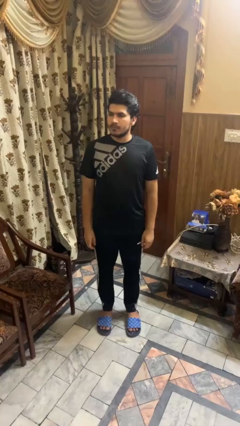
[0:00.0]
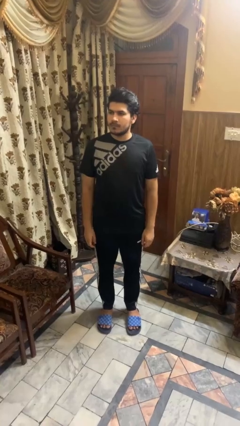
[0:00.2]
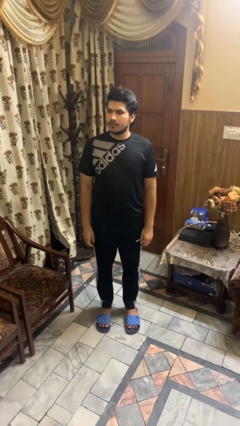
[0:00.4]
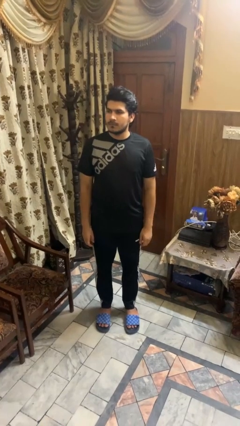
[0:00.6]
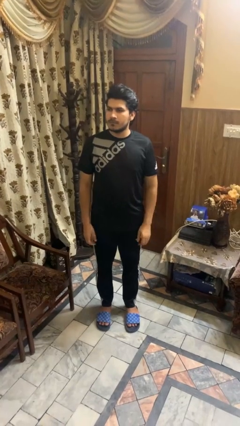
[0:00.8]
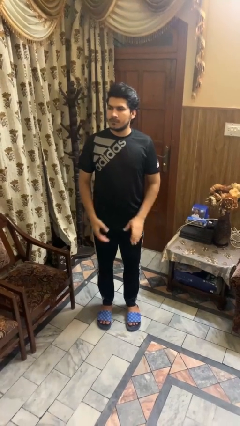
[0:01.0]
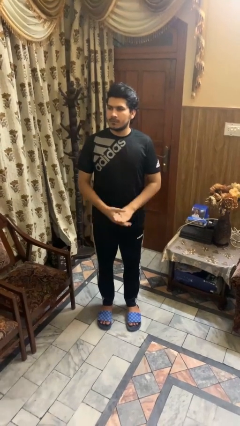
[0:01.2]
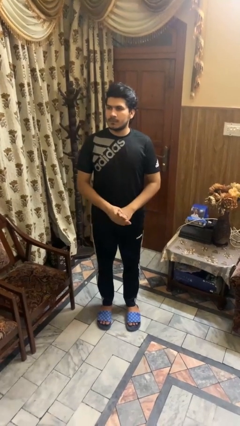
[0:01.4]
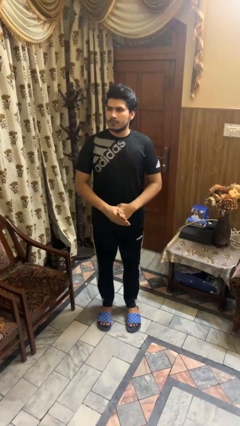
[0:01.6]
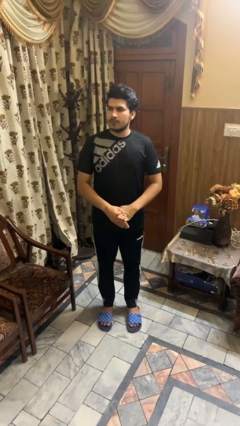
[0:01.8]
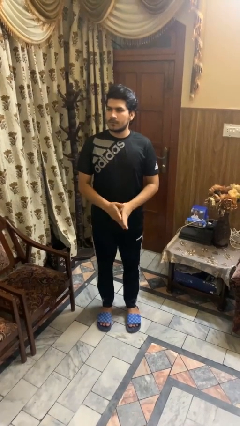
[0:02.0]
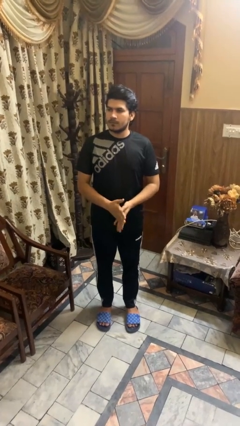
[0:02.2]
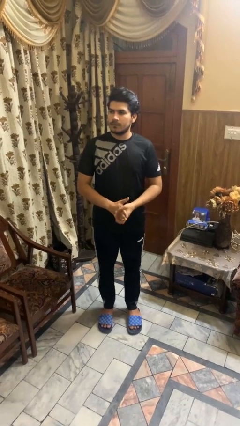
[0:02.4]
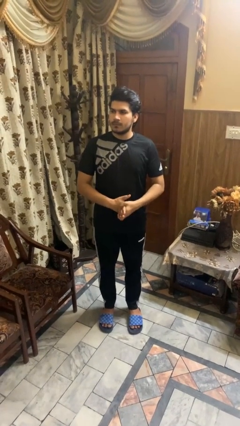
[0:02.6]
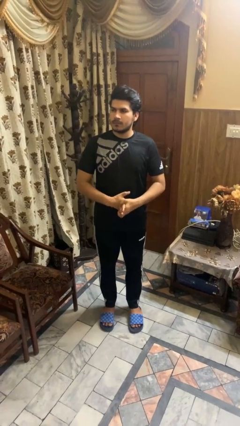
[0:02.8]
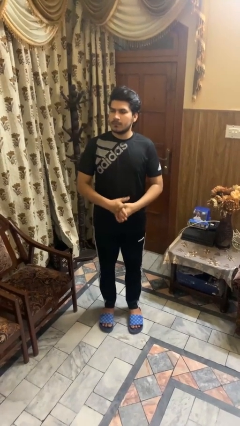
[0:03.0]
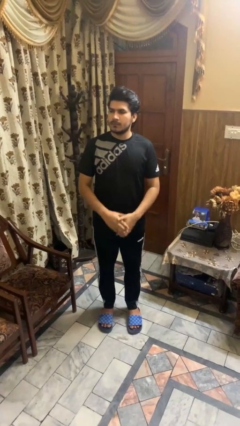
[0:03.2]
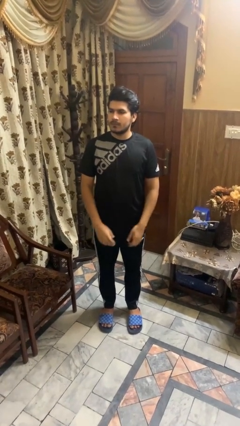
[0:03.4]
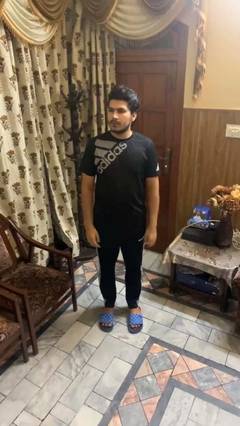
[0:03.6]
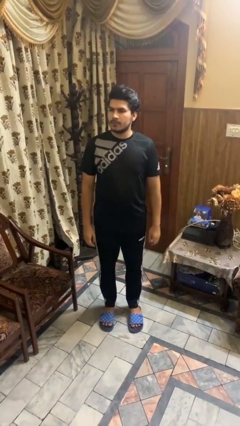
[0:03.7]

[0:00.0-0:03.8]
person cracks knuckles

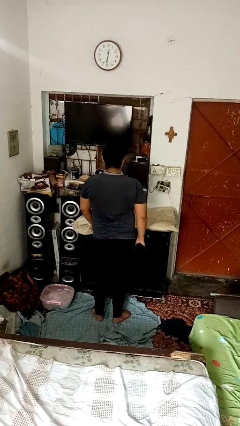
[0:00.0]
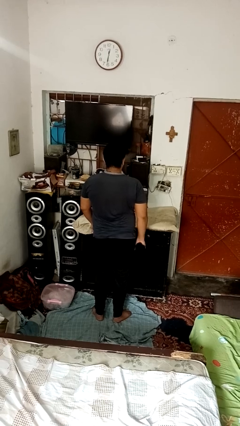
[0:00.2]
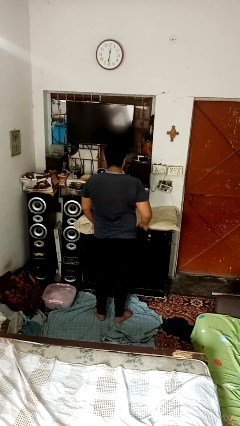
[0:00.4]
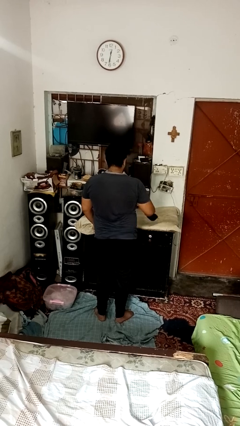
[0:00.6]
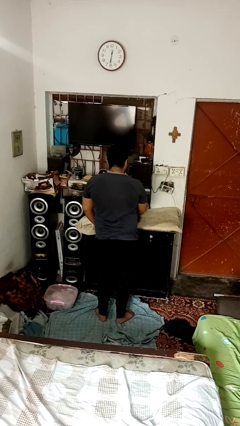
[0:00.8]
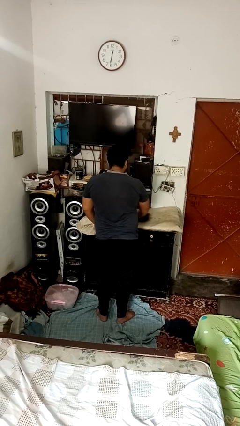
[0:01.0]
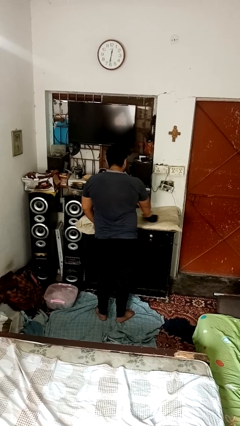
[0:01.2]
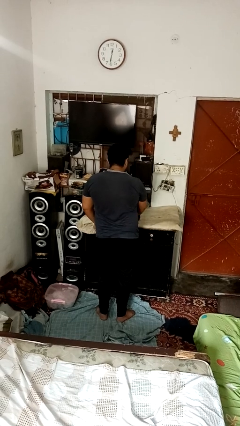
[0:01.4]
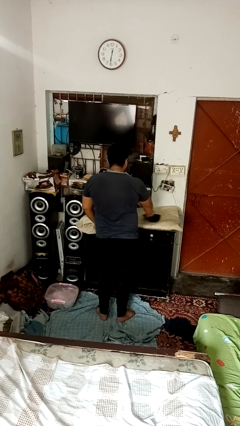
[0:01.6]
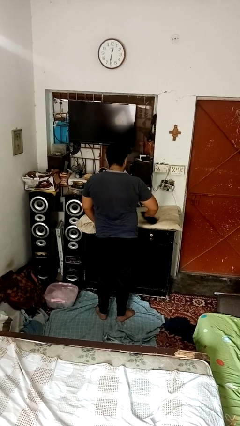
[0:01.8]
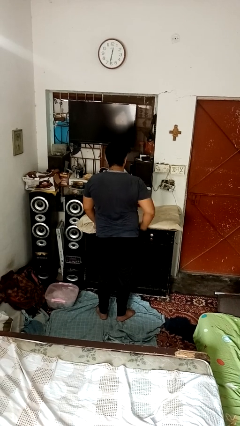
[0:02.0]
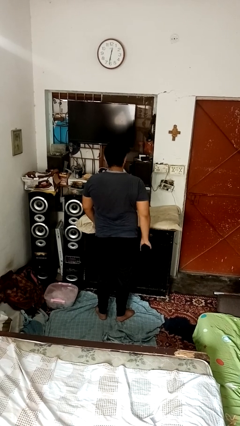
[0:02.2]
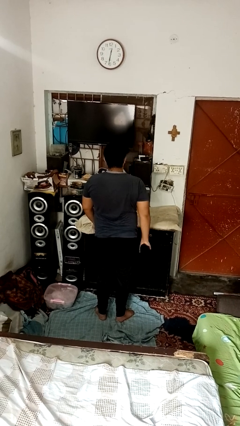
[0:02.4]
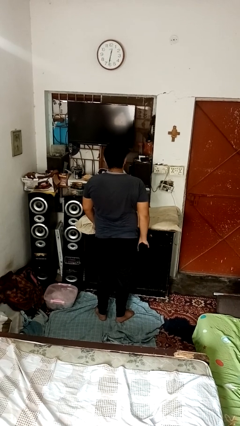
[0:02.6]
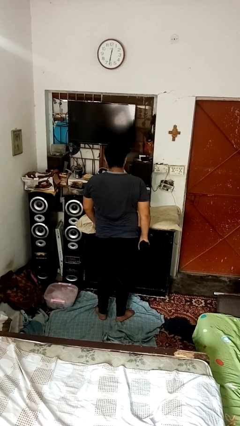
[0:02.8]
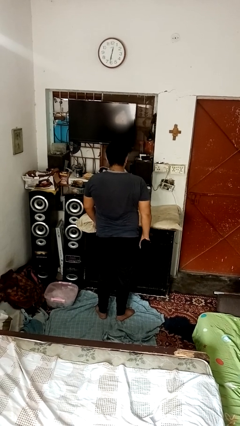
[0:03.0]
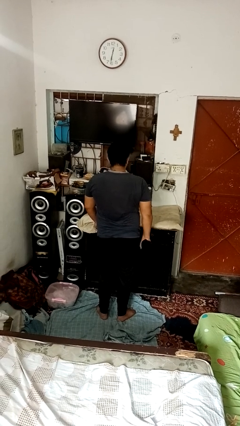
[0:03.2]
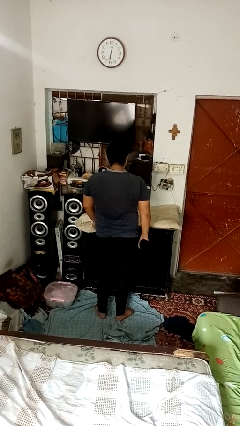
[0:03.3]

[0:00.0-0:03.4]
person cleans table with rag

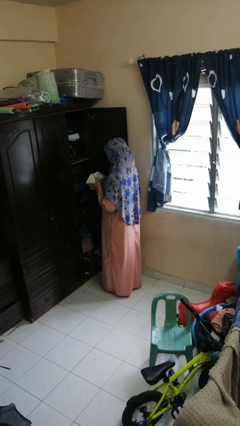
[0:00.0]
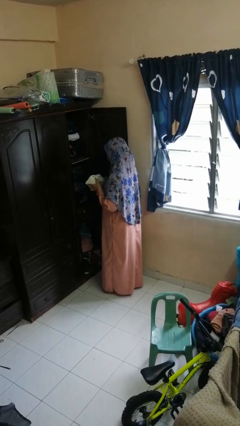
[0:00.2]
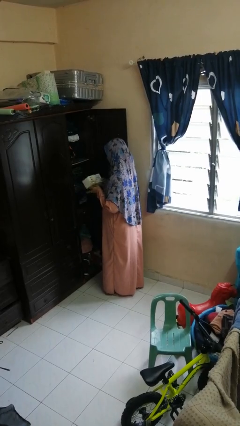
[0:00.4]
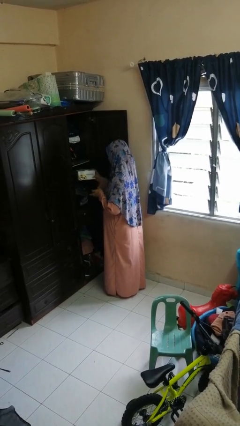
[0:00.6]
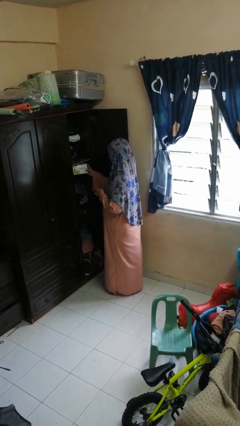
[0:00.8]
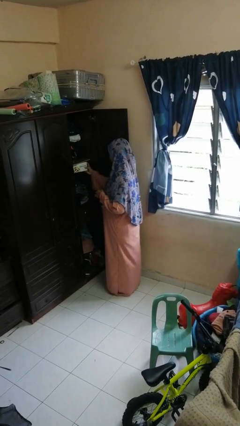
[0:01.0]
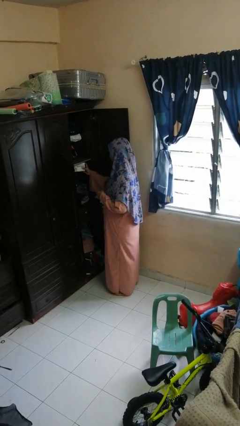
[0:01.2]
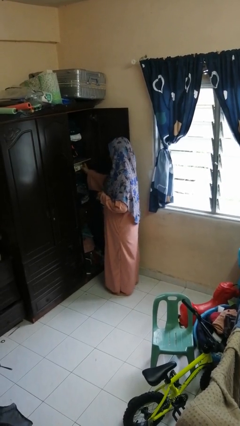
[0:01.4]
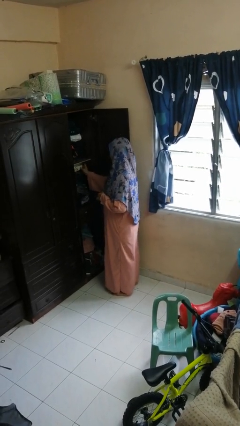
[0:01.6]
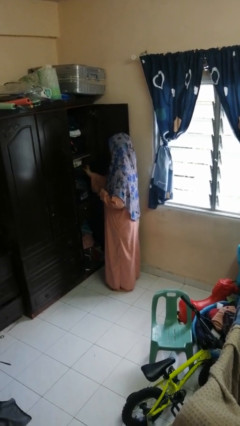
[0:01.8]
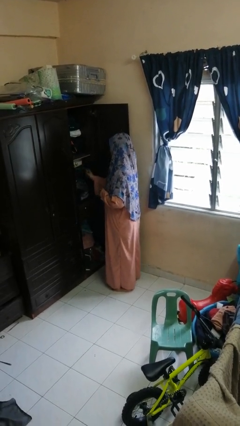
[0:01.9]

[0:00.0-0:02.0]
person puts down object into cabinet

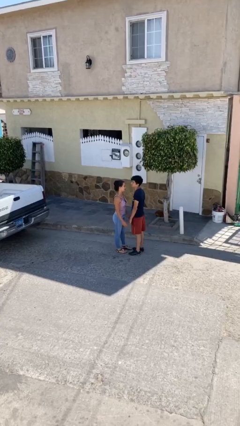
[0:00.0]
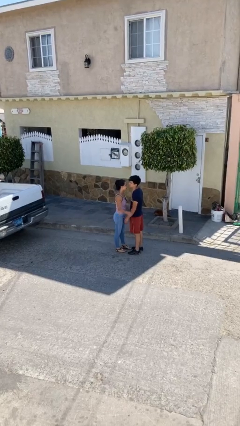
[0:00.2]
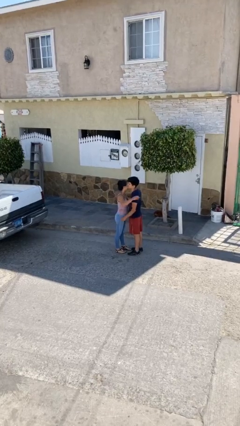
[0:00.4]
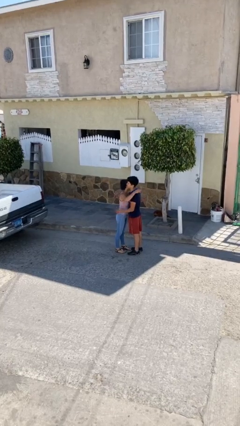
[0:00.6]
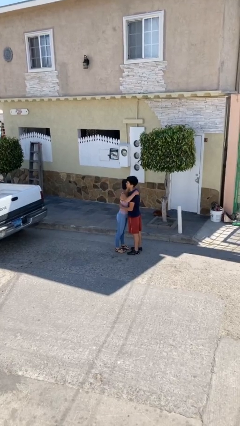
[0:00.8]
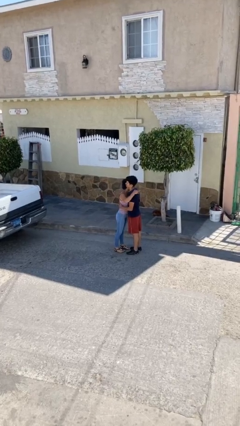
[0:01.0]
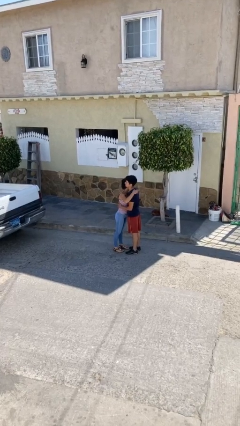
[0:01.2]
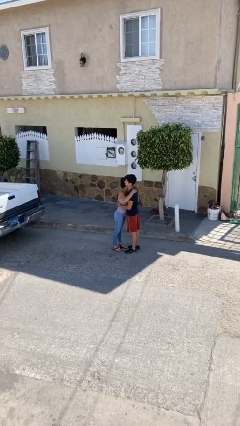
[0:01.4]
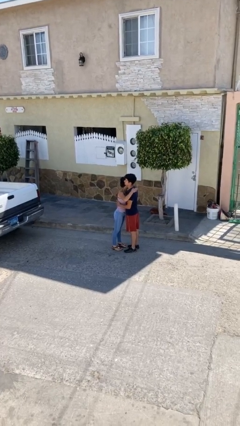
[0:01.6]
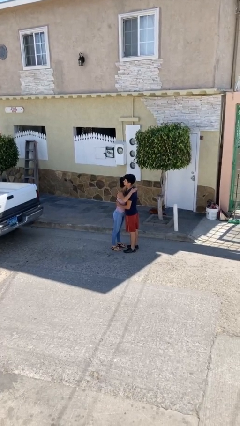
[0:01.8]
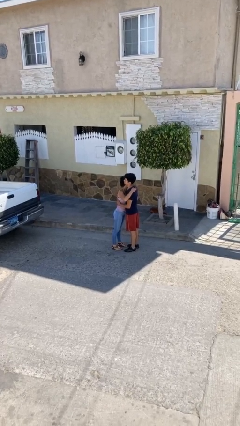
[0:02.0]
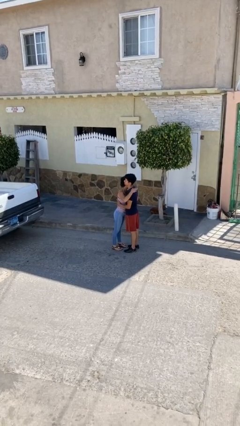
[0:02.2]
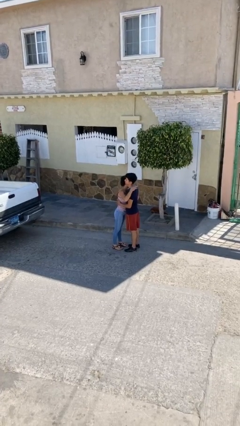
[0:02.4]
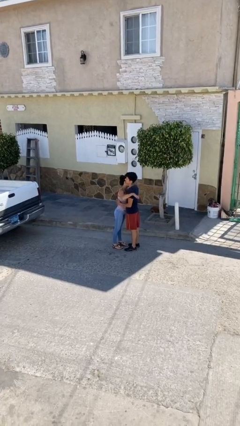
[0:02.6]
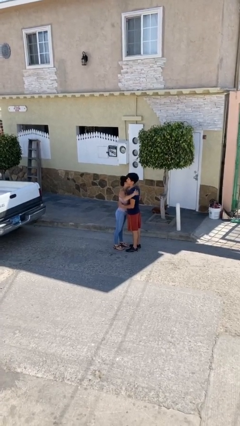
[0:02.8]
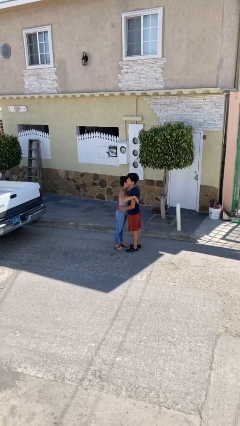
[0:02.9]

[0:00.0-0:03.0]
person embraces person

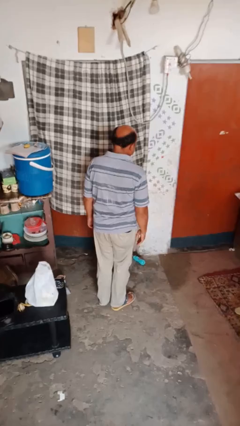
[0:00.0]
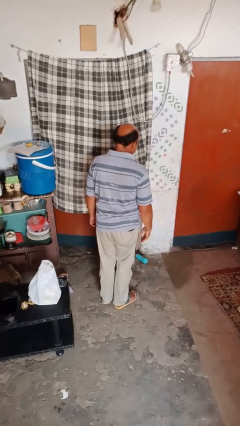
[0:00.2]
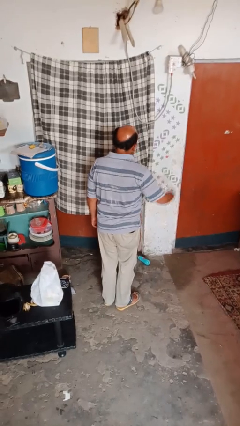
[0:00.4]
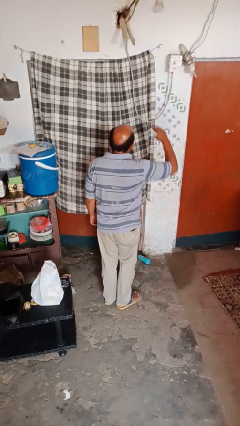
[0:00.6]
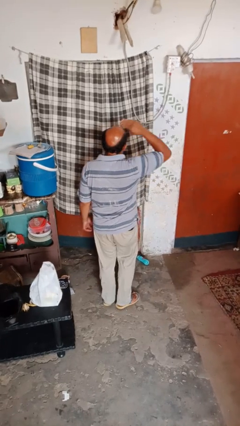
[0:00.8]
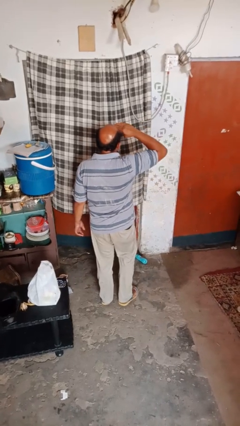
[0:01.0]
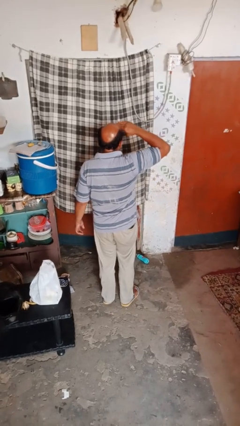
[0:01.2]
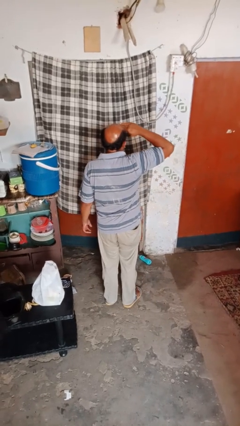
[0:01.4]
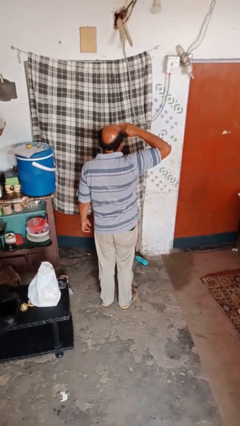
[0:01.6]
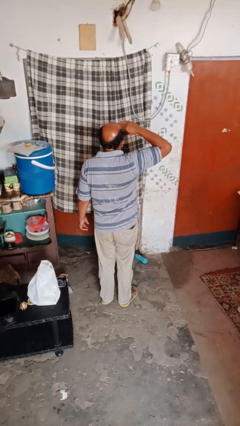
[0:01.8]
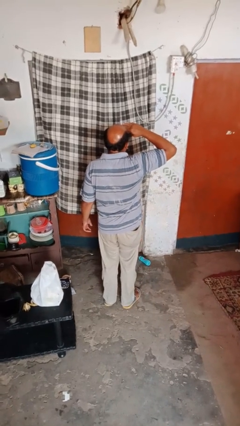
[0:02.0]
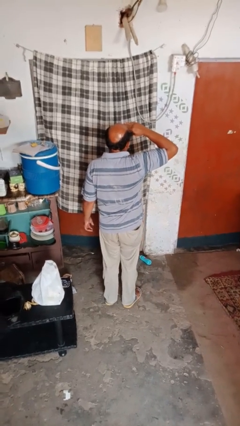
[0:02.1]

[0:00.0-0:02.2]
person salutes

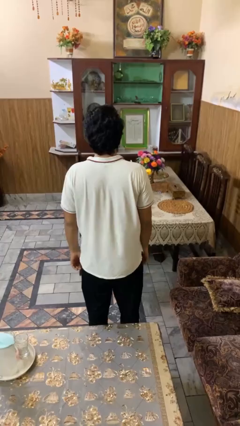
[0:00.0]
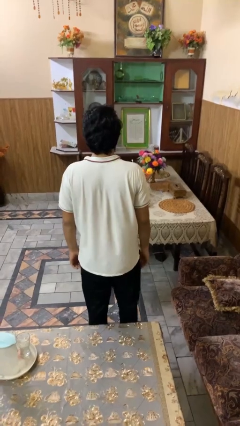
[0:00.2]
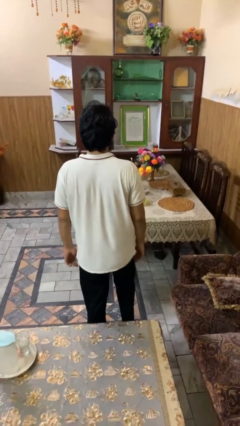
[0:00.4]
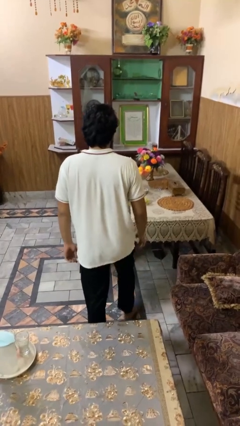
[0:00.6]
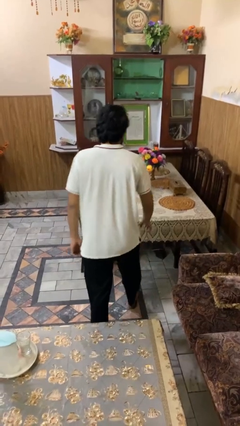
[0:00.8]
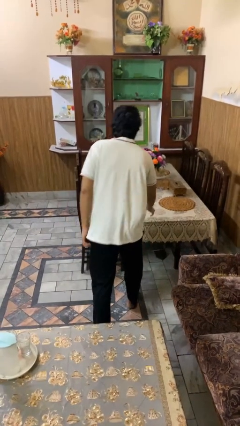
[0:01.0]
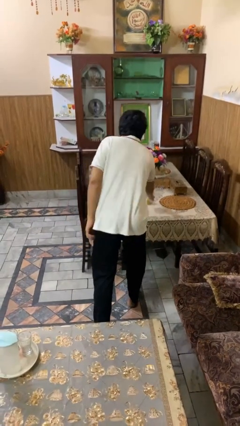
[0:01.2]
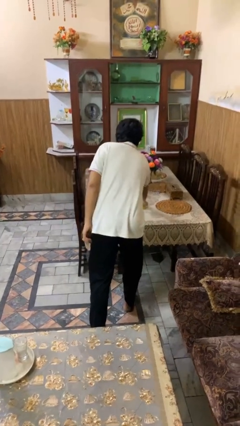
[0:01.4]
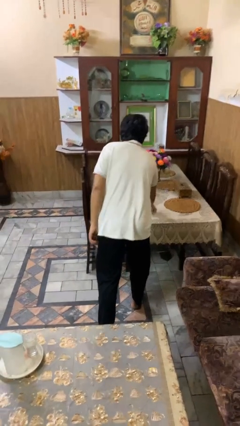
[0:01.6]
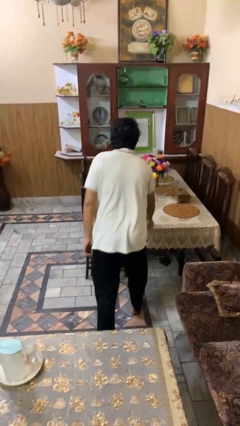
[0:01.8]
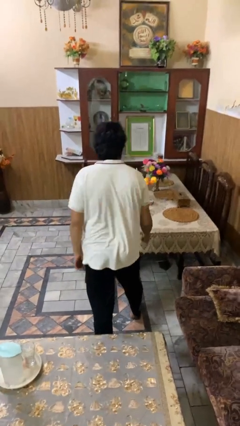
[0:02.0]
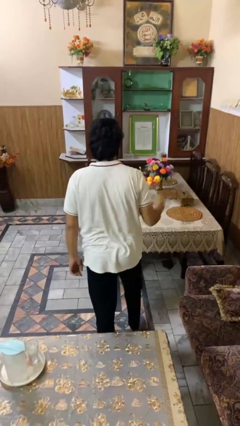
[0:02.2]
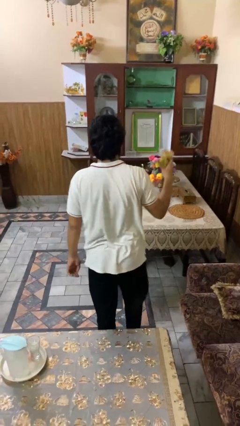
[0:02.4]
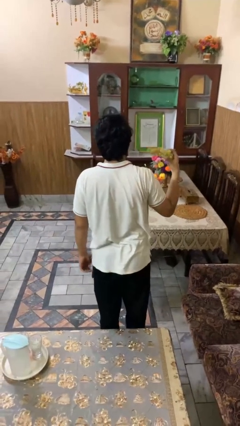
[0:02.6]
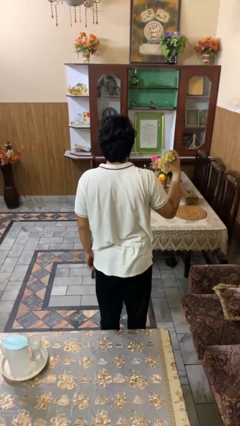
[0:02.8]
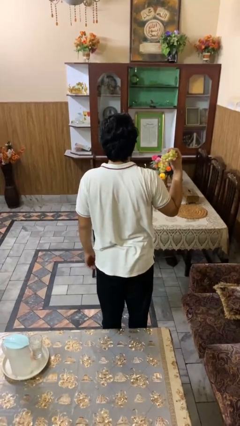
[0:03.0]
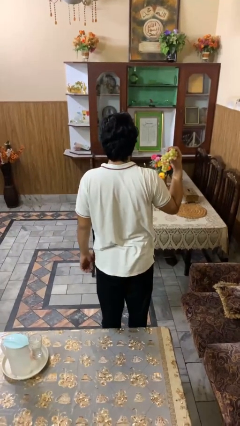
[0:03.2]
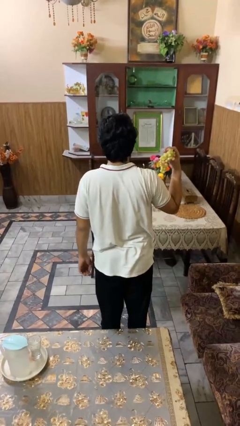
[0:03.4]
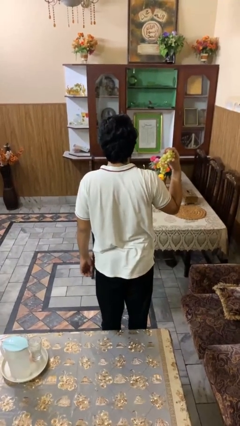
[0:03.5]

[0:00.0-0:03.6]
person picks up object from table
